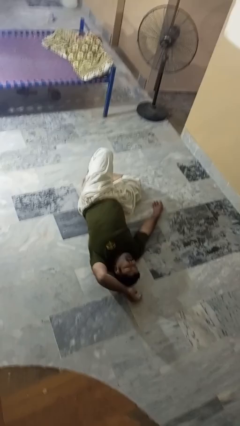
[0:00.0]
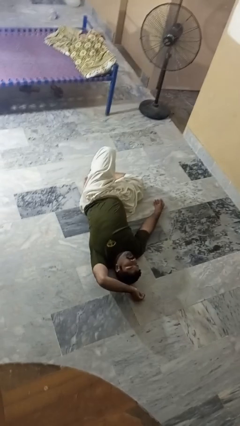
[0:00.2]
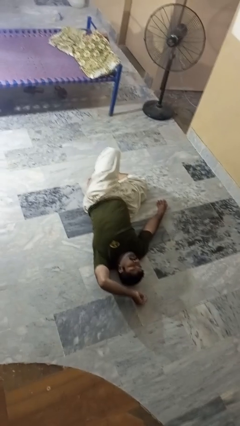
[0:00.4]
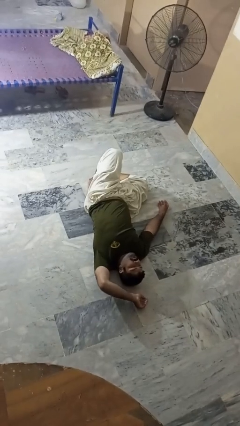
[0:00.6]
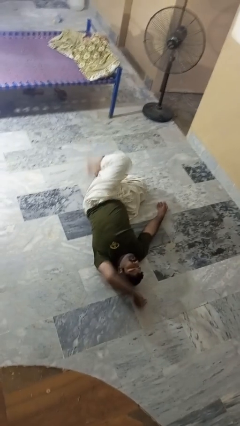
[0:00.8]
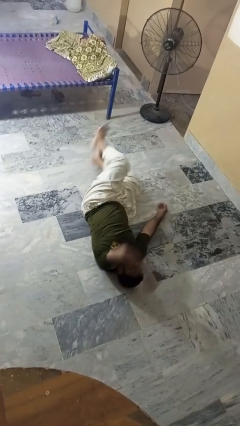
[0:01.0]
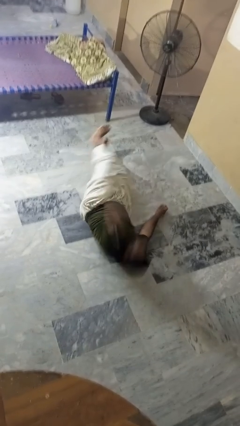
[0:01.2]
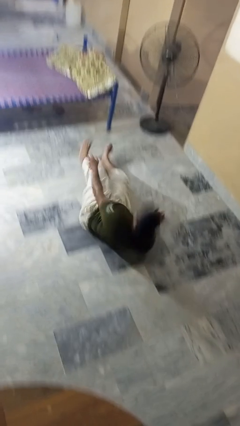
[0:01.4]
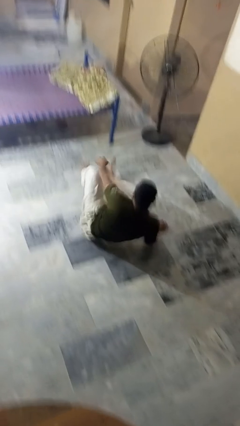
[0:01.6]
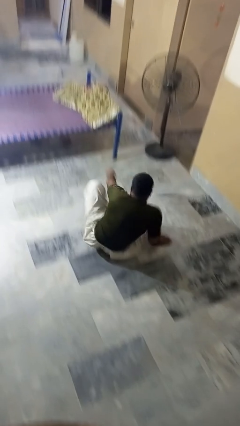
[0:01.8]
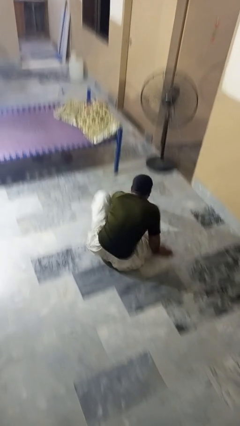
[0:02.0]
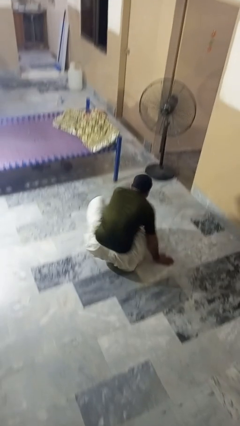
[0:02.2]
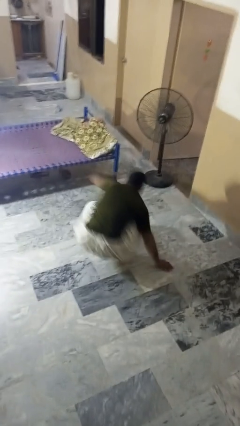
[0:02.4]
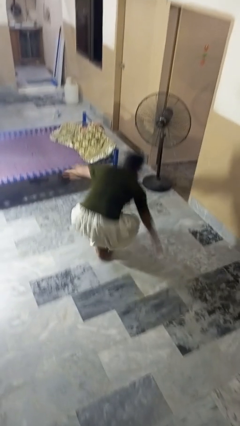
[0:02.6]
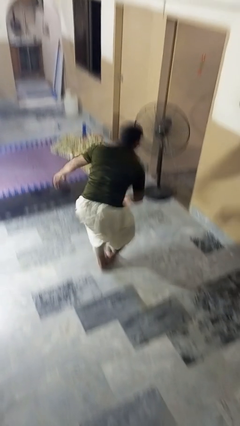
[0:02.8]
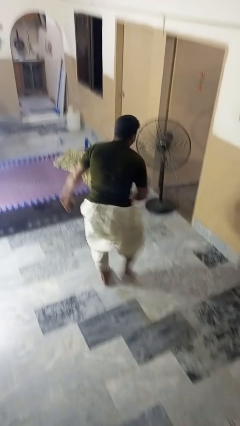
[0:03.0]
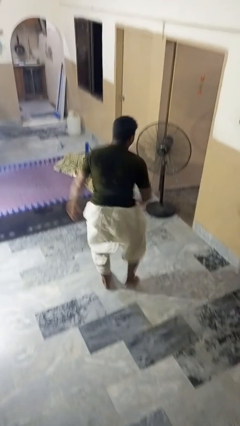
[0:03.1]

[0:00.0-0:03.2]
person stands up from floor

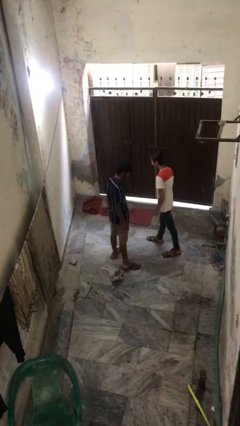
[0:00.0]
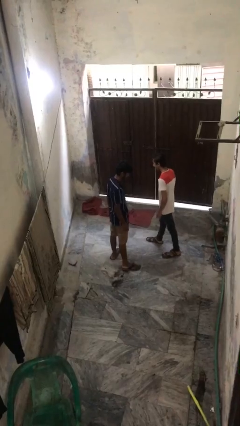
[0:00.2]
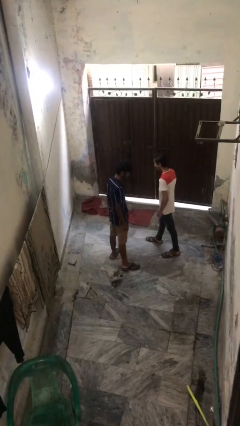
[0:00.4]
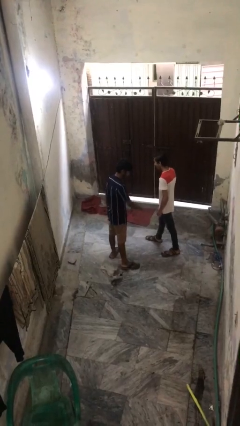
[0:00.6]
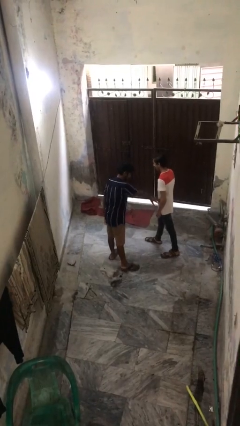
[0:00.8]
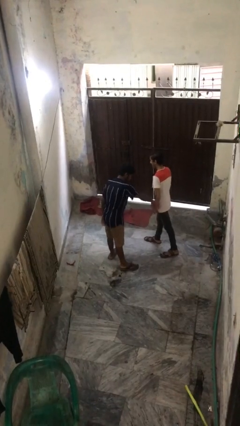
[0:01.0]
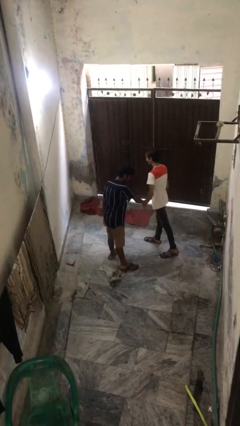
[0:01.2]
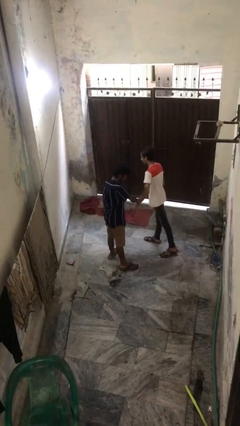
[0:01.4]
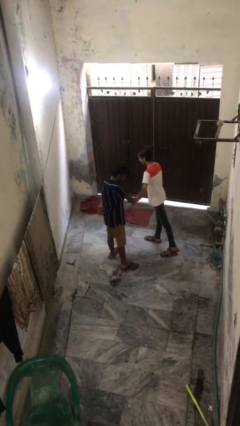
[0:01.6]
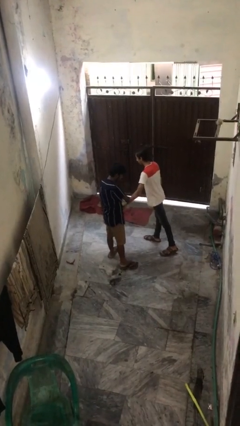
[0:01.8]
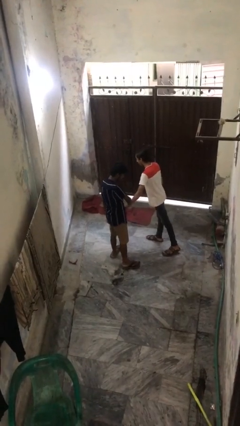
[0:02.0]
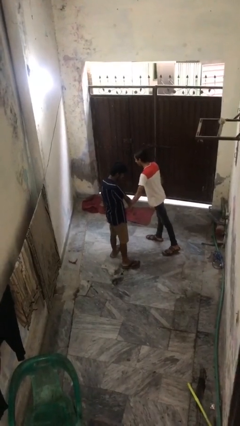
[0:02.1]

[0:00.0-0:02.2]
person grabs person by forearm

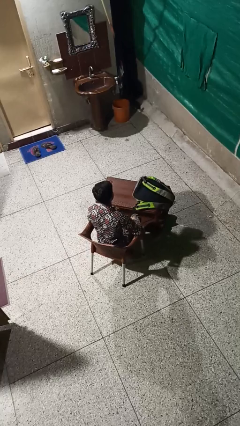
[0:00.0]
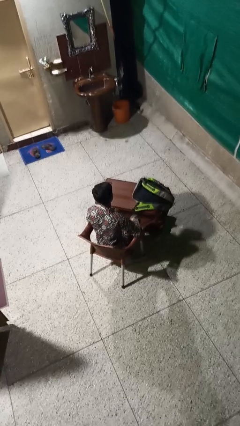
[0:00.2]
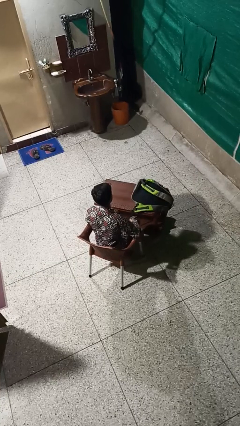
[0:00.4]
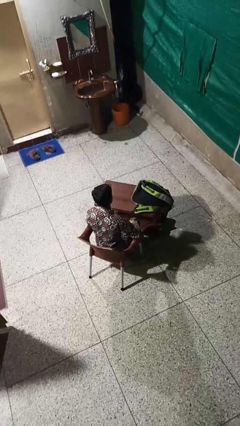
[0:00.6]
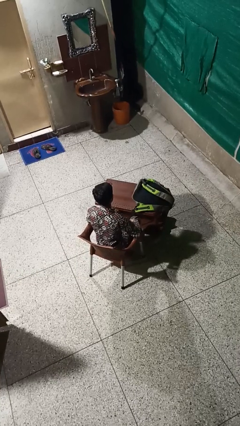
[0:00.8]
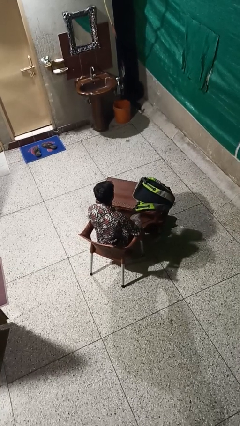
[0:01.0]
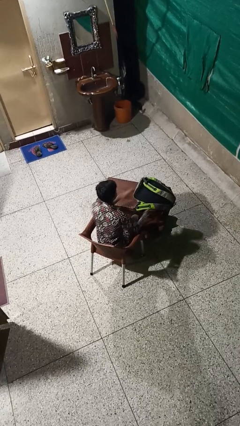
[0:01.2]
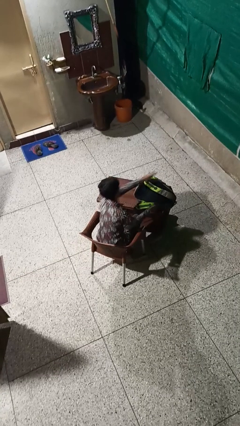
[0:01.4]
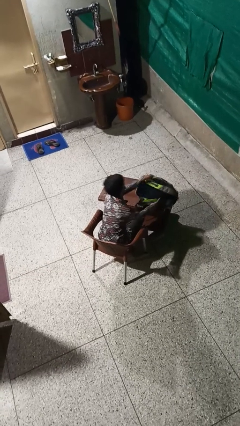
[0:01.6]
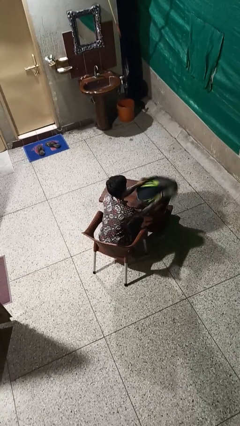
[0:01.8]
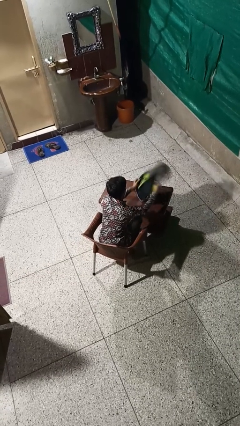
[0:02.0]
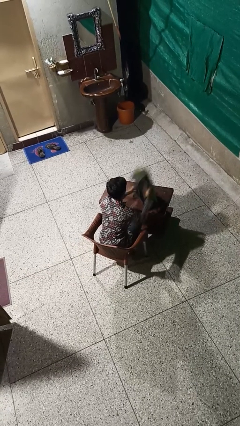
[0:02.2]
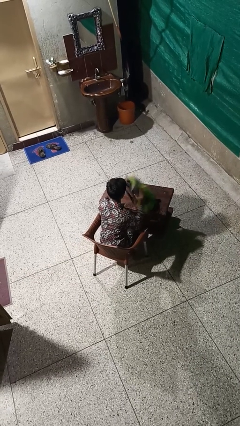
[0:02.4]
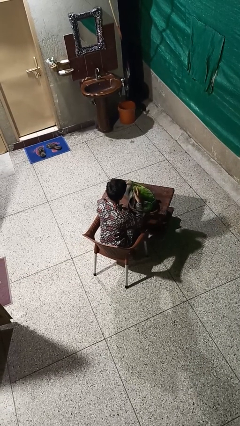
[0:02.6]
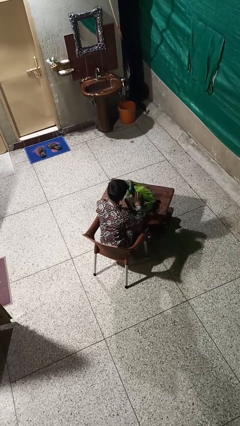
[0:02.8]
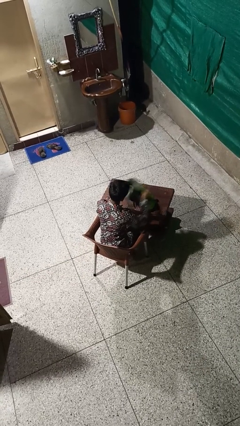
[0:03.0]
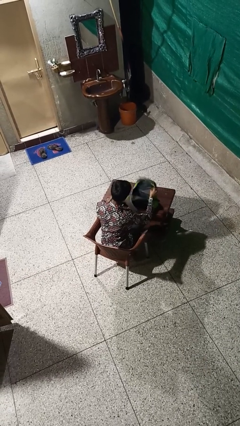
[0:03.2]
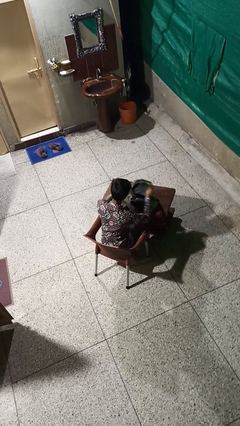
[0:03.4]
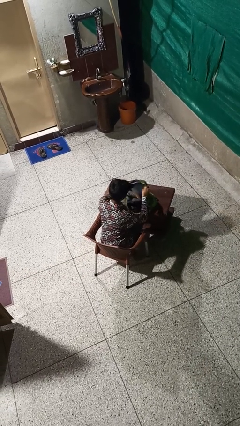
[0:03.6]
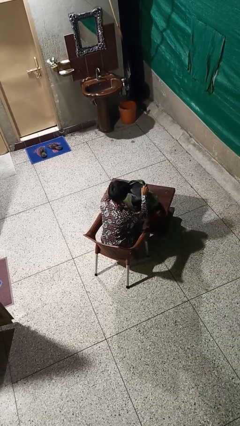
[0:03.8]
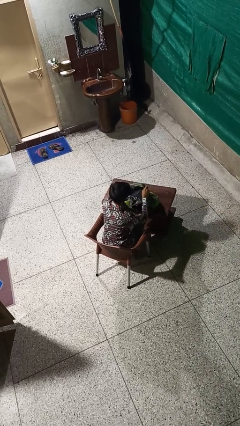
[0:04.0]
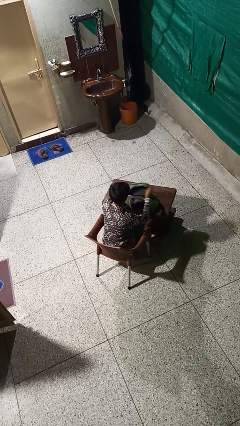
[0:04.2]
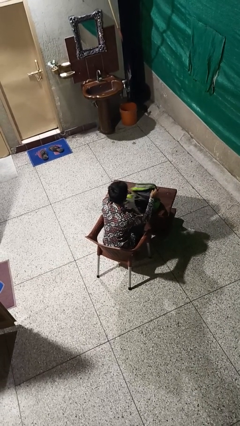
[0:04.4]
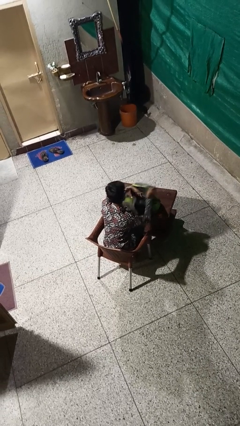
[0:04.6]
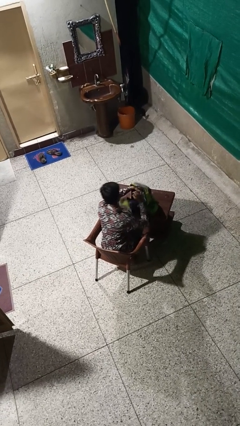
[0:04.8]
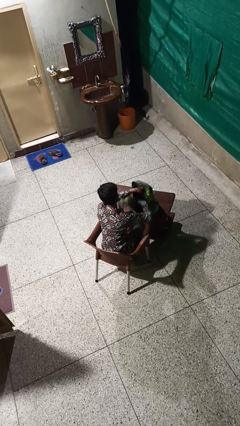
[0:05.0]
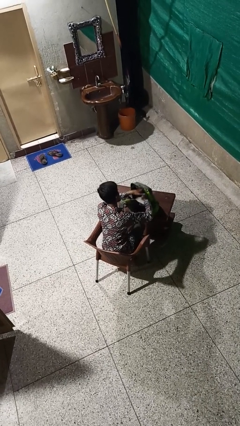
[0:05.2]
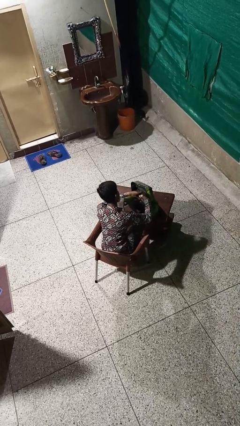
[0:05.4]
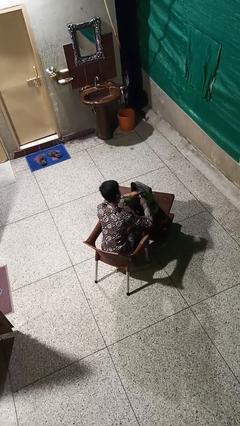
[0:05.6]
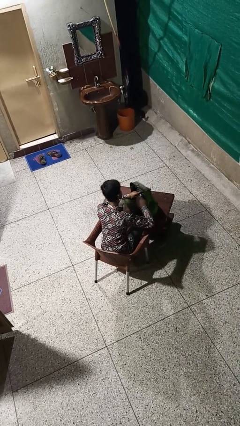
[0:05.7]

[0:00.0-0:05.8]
person searches in backpack

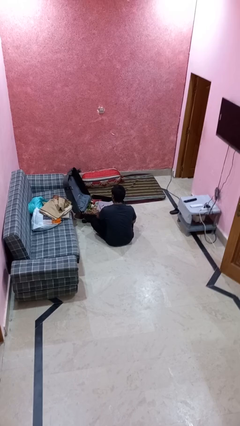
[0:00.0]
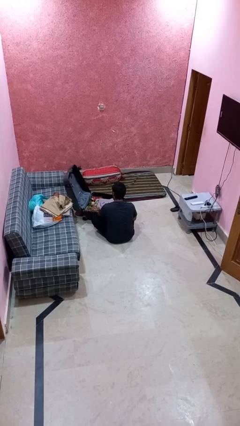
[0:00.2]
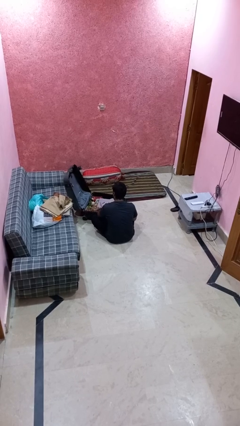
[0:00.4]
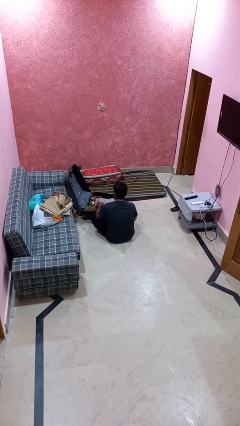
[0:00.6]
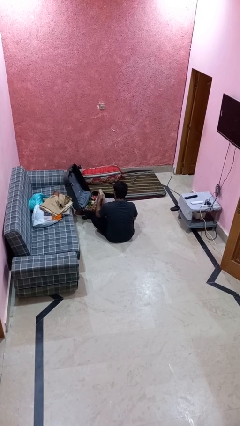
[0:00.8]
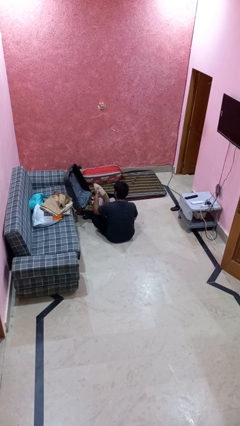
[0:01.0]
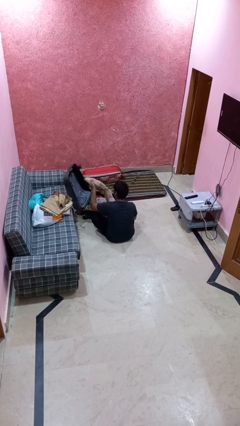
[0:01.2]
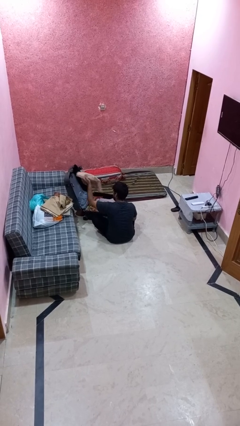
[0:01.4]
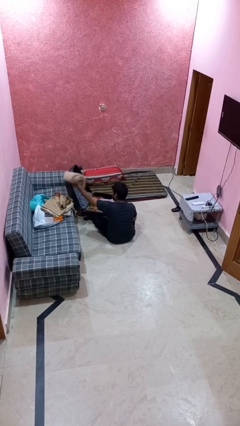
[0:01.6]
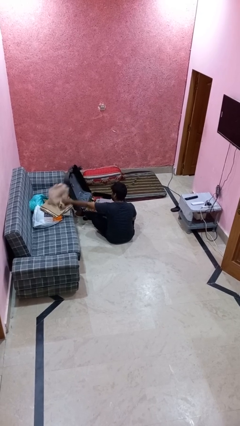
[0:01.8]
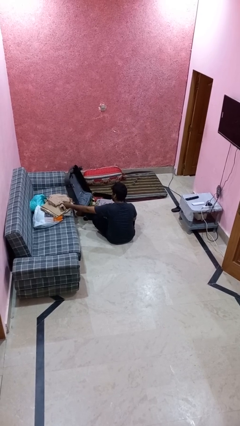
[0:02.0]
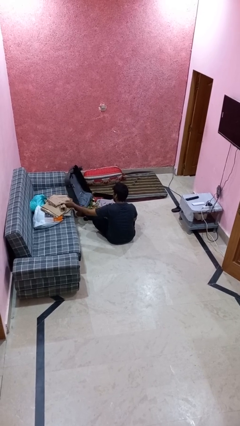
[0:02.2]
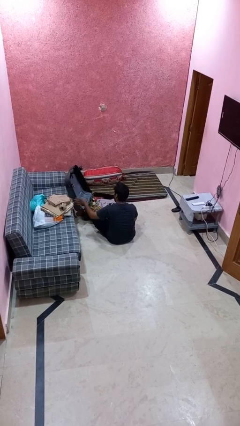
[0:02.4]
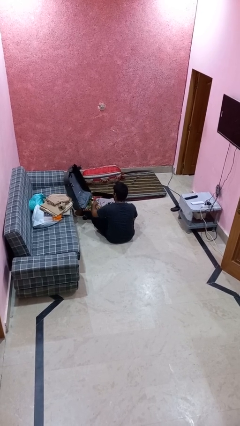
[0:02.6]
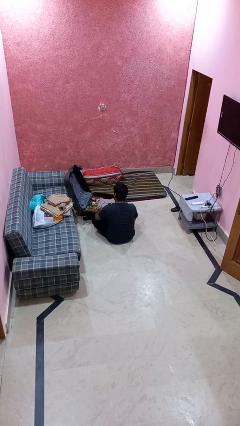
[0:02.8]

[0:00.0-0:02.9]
person unloads clothes from suitcase

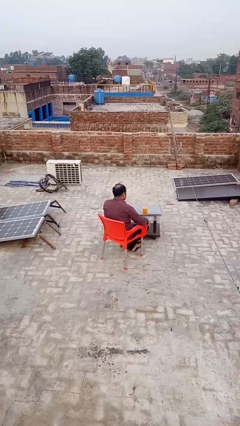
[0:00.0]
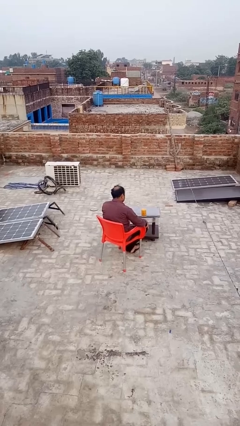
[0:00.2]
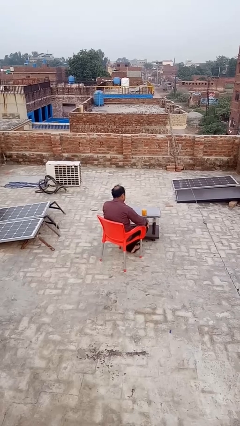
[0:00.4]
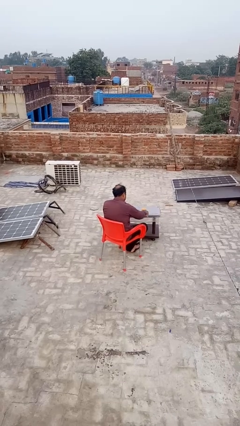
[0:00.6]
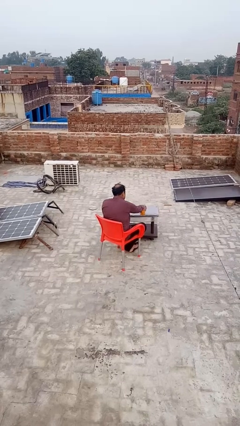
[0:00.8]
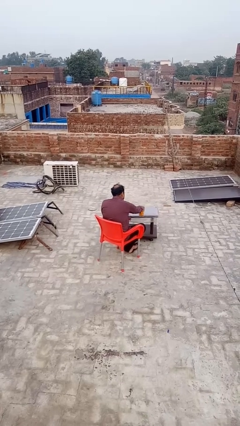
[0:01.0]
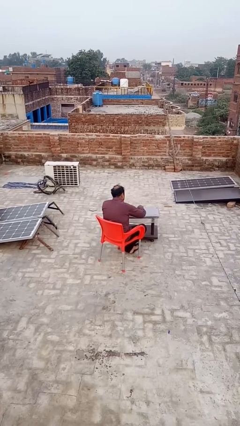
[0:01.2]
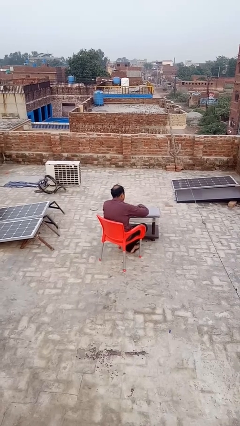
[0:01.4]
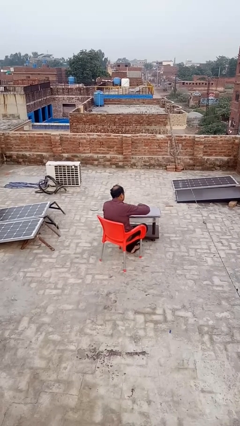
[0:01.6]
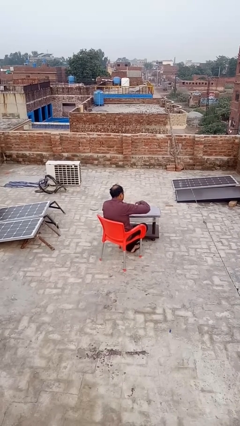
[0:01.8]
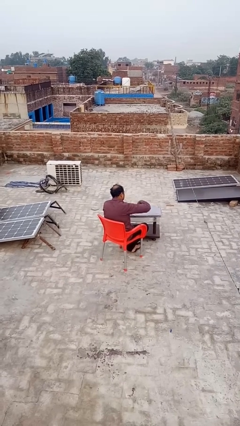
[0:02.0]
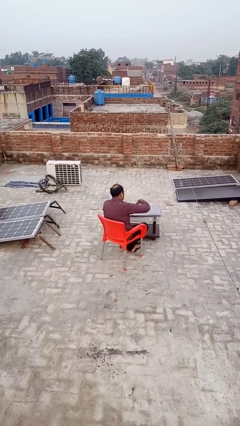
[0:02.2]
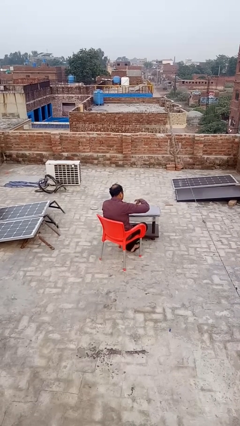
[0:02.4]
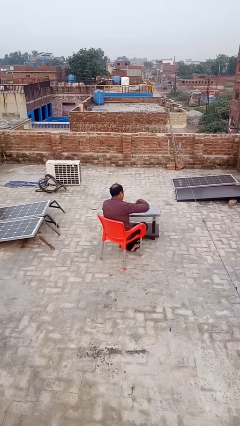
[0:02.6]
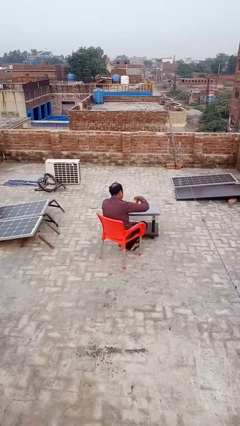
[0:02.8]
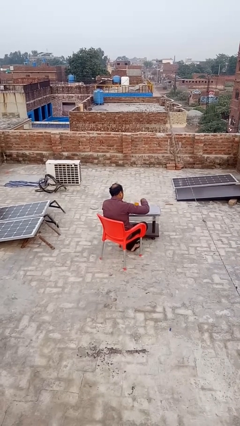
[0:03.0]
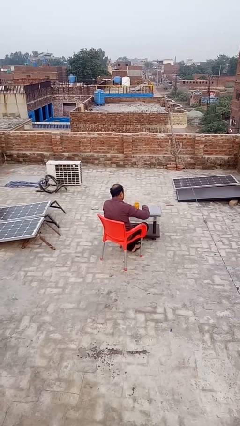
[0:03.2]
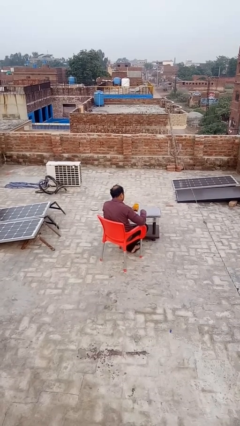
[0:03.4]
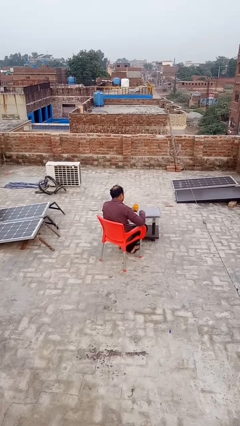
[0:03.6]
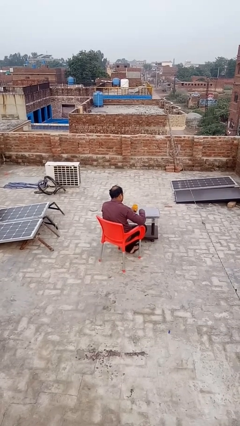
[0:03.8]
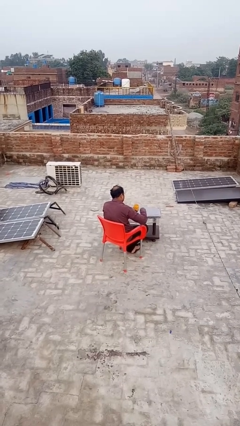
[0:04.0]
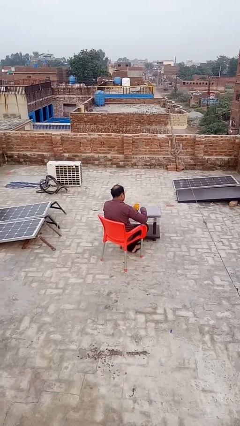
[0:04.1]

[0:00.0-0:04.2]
person opens jar
